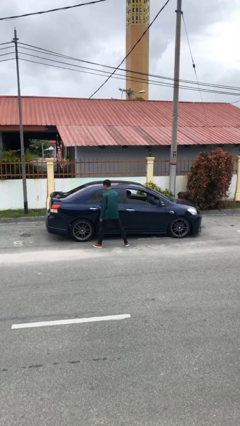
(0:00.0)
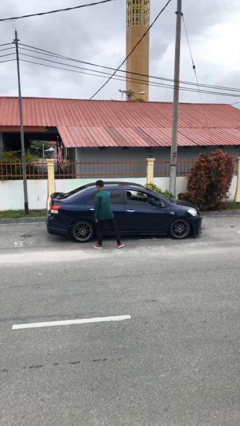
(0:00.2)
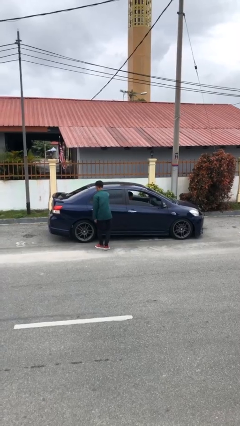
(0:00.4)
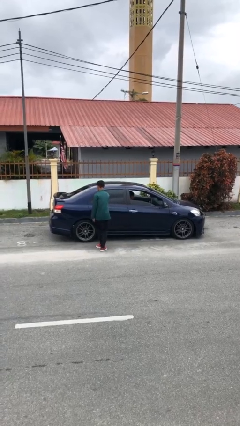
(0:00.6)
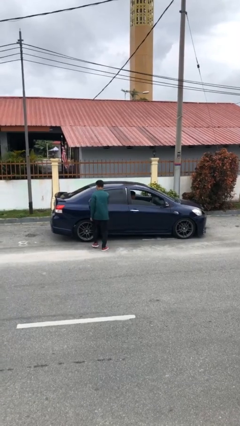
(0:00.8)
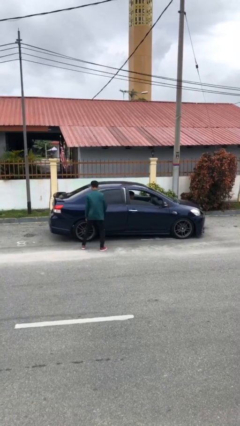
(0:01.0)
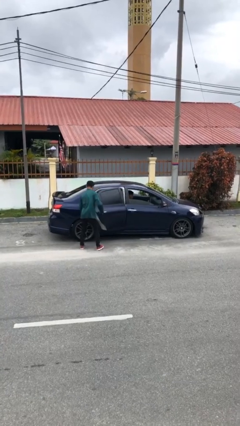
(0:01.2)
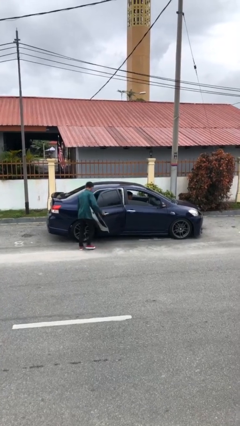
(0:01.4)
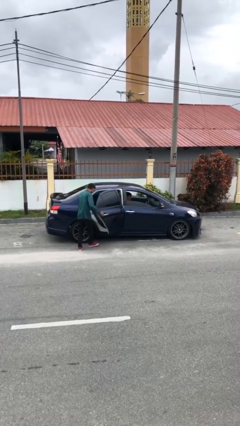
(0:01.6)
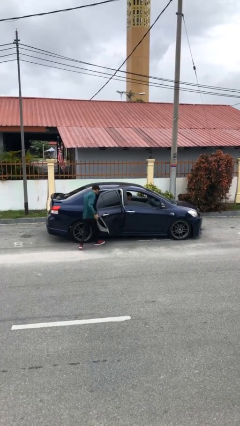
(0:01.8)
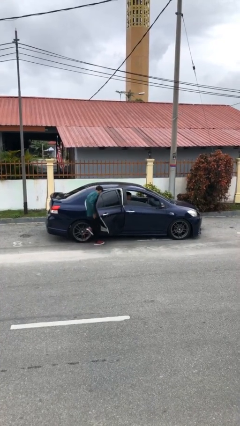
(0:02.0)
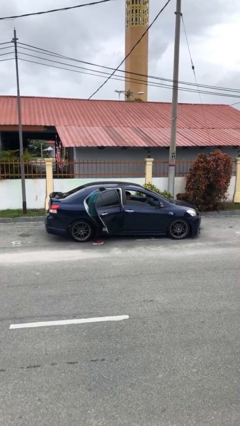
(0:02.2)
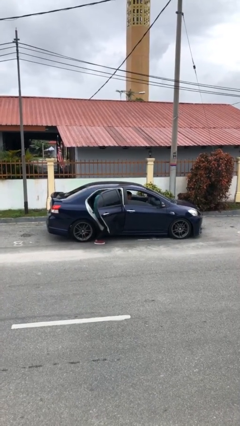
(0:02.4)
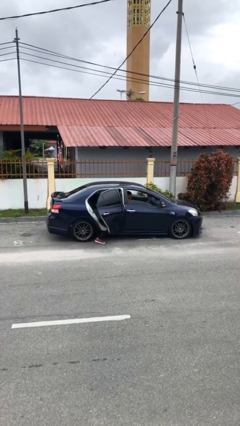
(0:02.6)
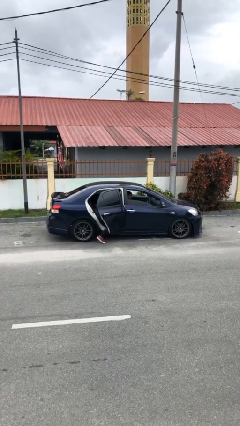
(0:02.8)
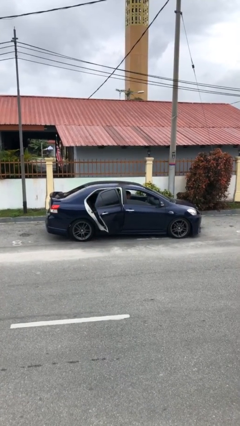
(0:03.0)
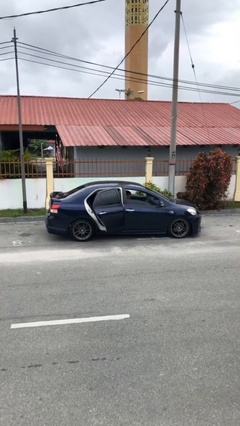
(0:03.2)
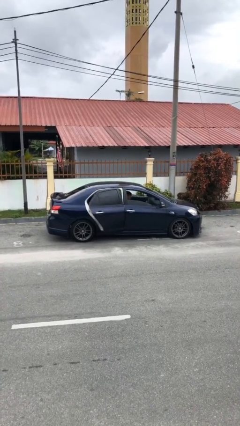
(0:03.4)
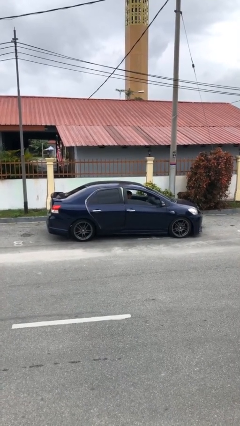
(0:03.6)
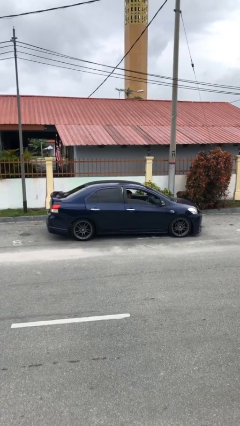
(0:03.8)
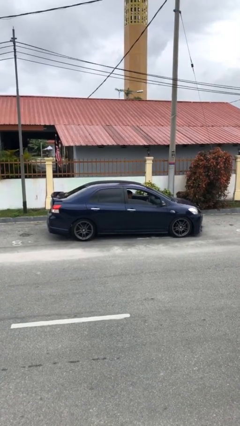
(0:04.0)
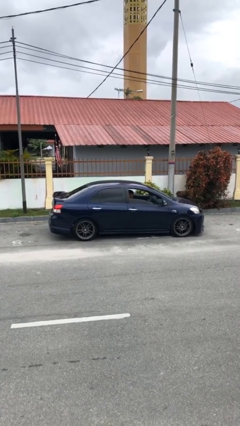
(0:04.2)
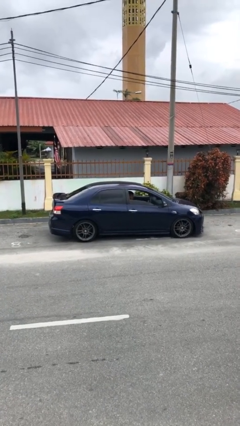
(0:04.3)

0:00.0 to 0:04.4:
car picks up person

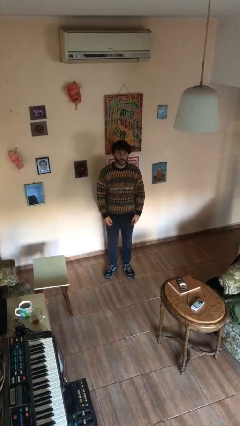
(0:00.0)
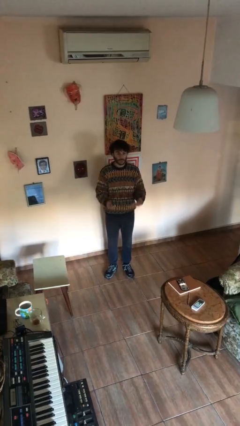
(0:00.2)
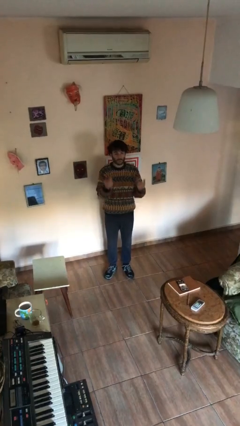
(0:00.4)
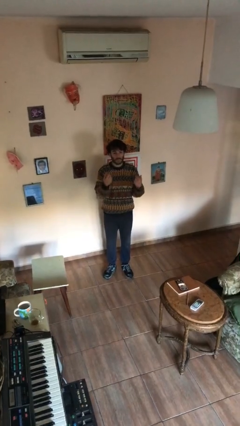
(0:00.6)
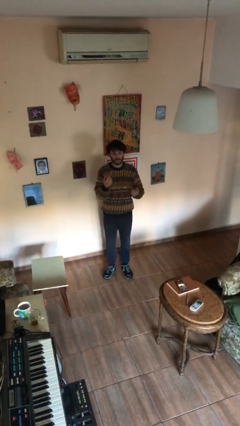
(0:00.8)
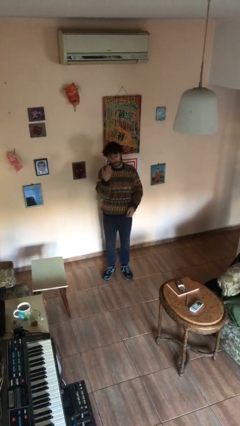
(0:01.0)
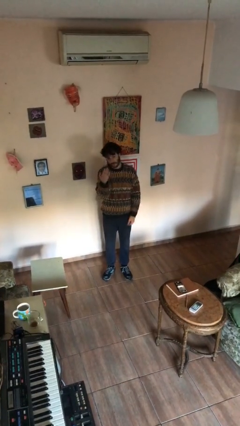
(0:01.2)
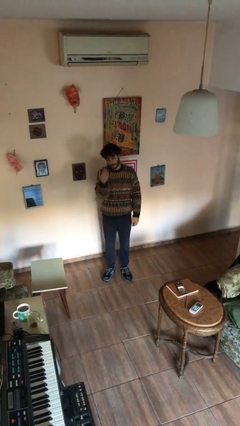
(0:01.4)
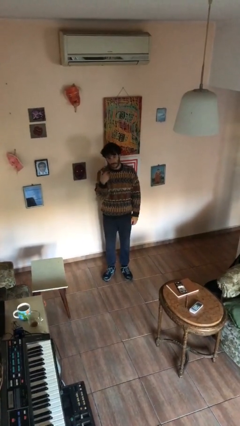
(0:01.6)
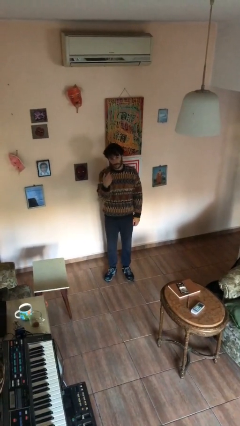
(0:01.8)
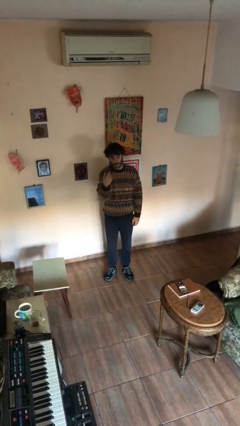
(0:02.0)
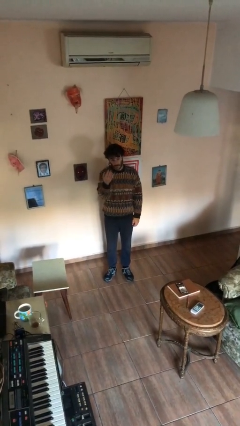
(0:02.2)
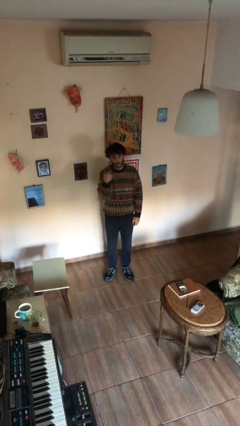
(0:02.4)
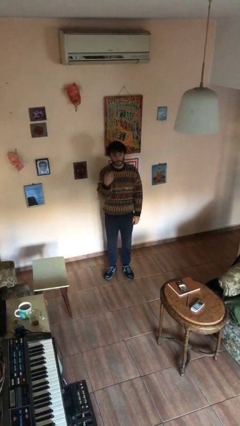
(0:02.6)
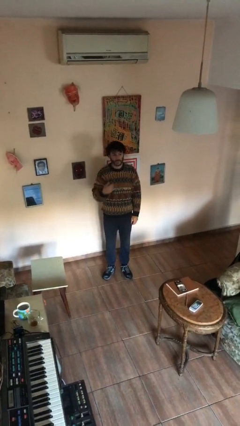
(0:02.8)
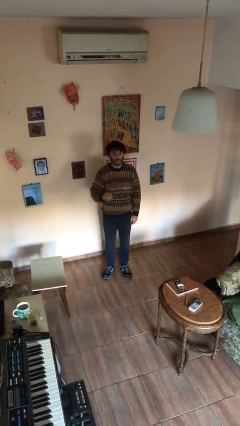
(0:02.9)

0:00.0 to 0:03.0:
person gestures come here

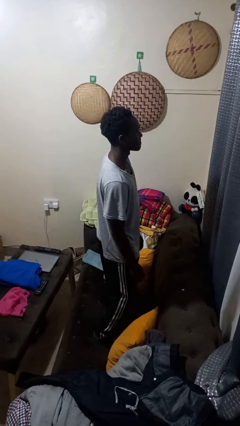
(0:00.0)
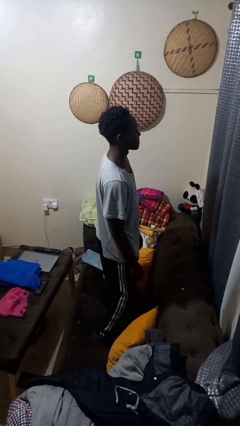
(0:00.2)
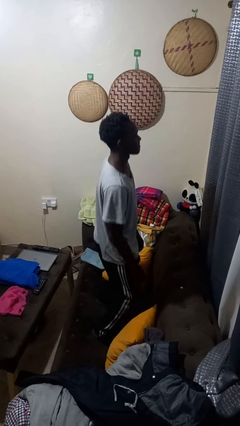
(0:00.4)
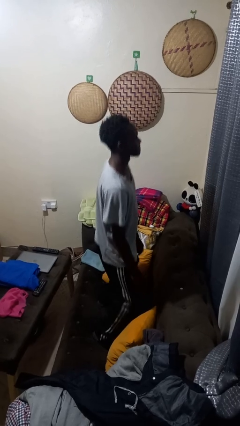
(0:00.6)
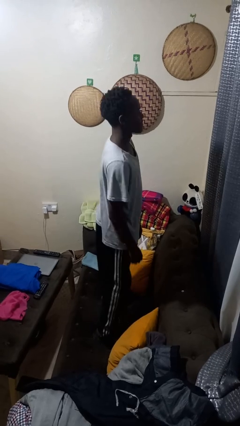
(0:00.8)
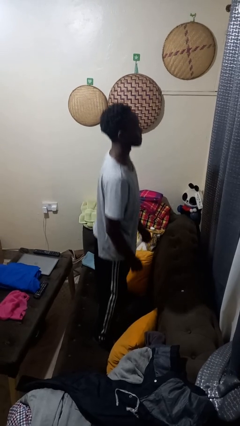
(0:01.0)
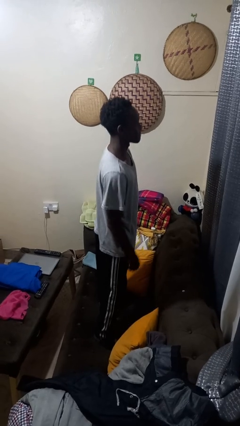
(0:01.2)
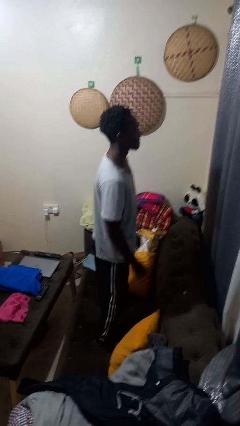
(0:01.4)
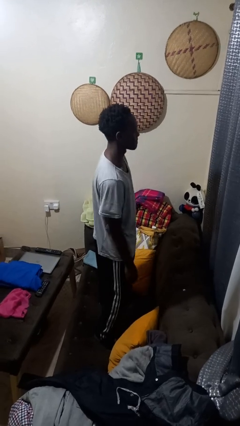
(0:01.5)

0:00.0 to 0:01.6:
person jumps on couch

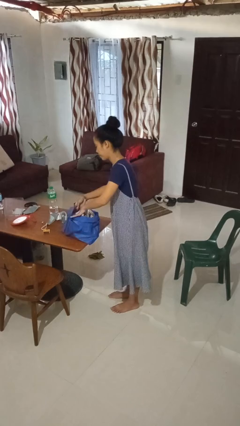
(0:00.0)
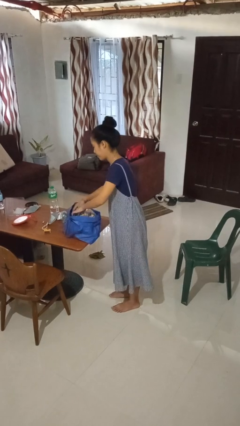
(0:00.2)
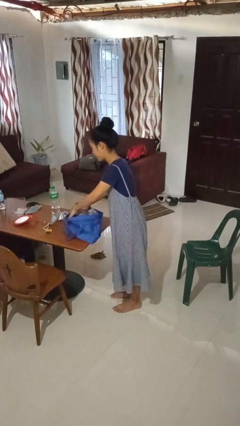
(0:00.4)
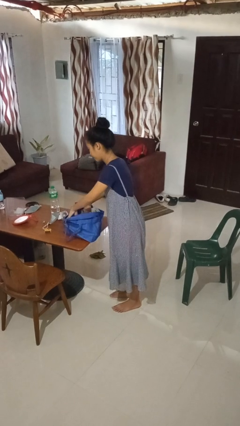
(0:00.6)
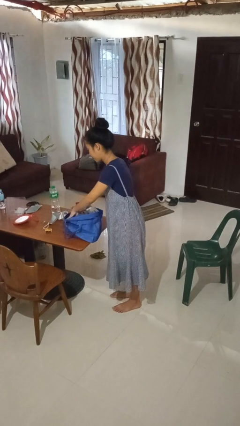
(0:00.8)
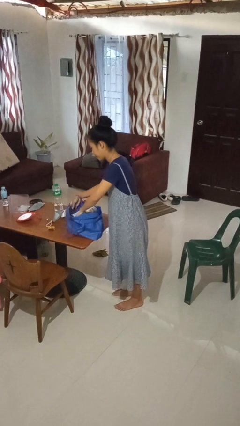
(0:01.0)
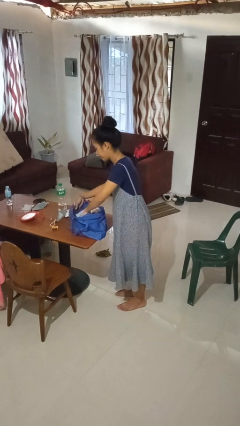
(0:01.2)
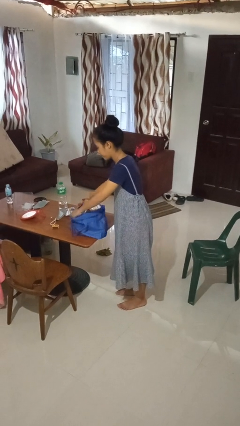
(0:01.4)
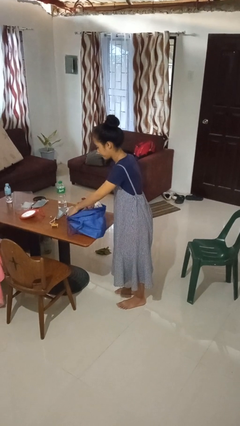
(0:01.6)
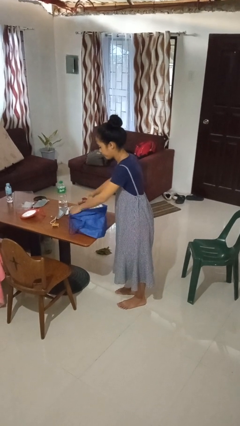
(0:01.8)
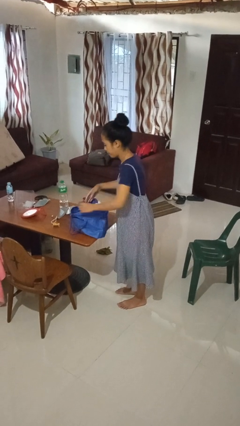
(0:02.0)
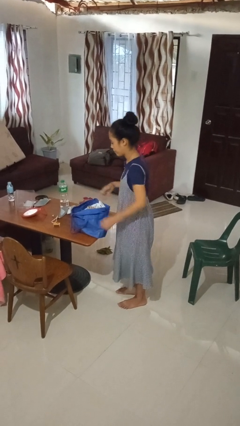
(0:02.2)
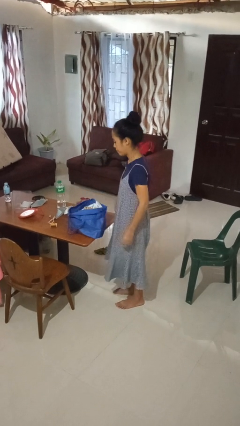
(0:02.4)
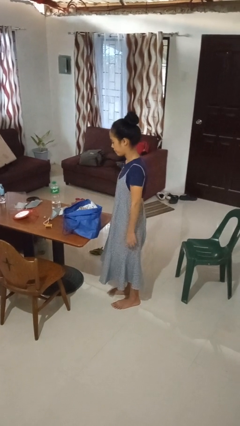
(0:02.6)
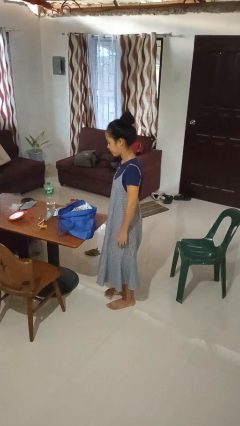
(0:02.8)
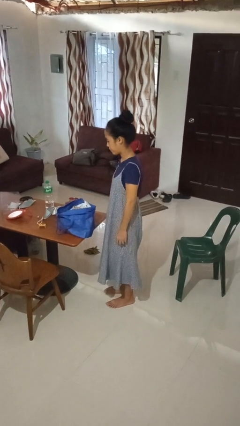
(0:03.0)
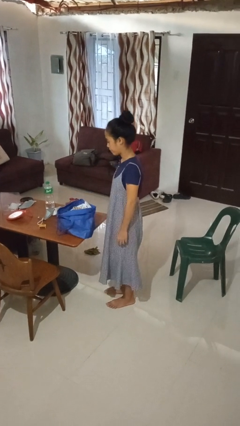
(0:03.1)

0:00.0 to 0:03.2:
person searches in bag

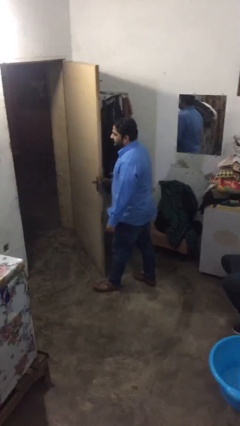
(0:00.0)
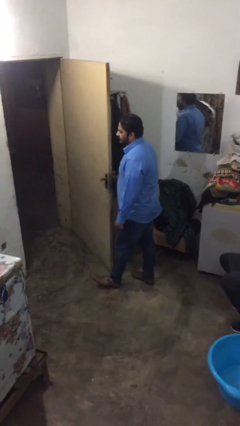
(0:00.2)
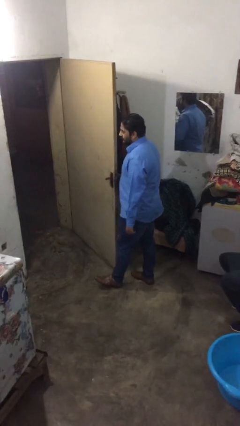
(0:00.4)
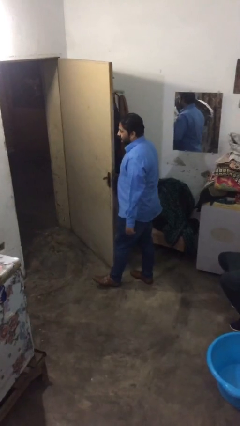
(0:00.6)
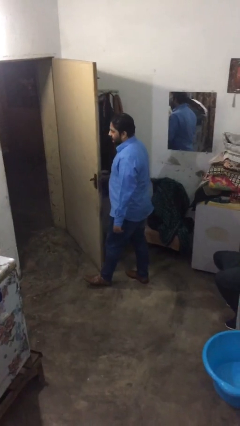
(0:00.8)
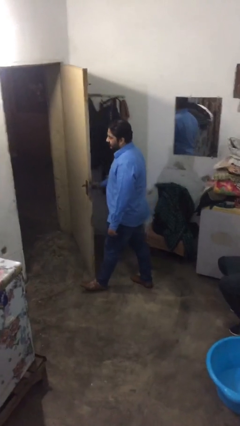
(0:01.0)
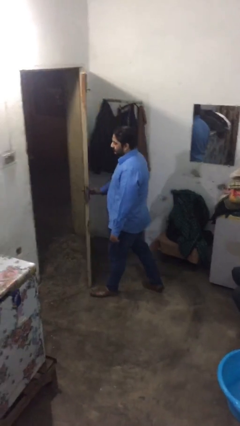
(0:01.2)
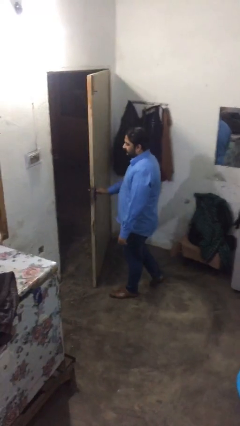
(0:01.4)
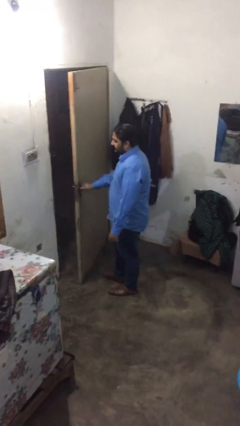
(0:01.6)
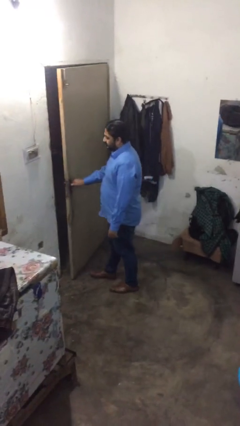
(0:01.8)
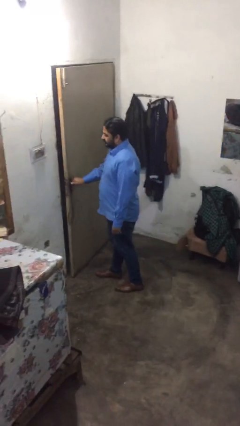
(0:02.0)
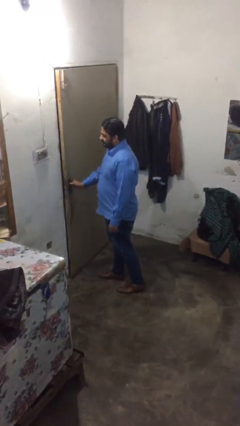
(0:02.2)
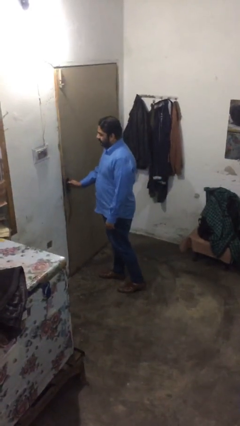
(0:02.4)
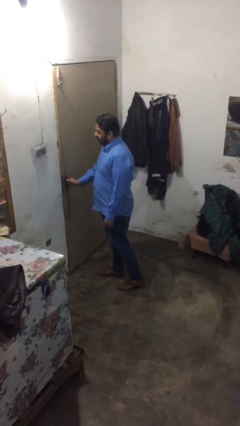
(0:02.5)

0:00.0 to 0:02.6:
person closes facility door

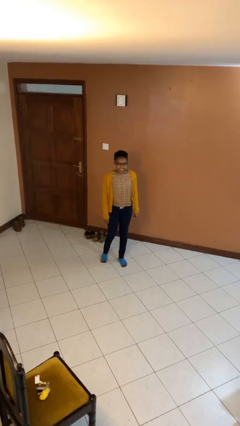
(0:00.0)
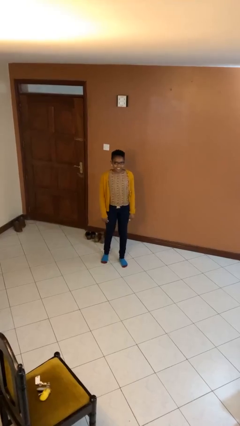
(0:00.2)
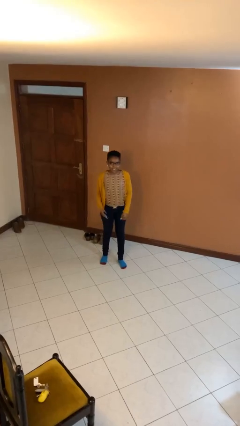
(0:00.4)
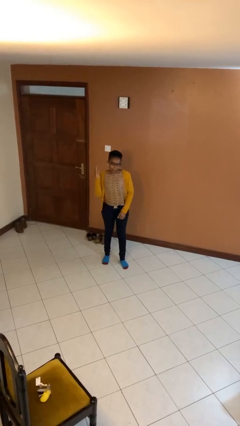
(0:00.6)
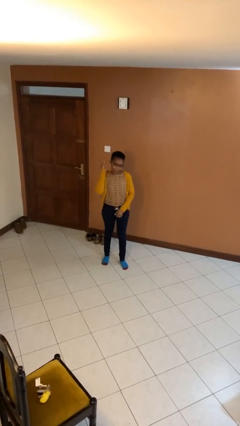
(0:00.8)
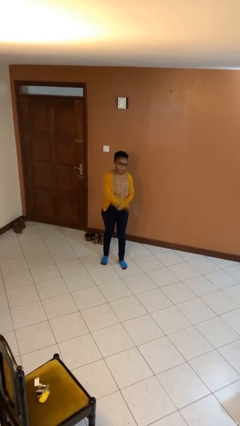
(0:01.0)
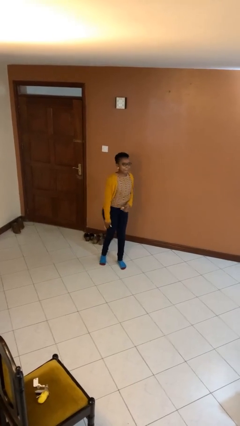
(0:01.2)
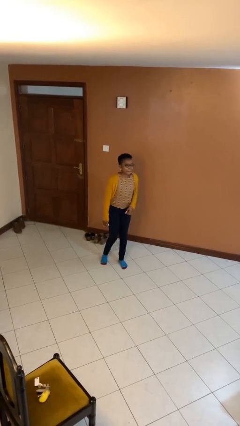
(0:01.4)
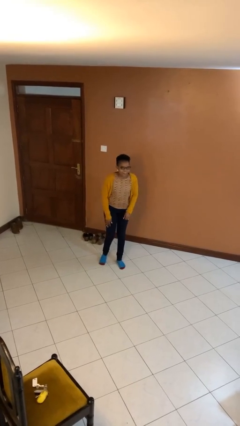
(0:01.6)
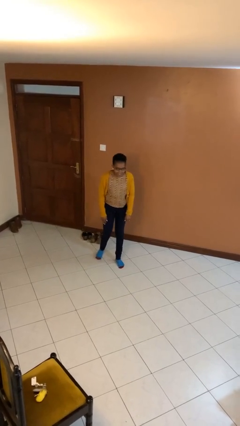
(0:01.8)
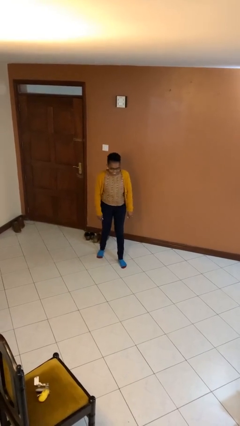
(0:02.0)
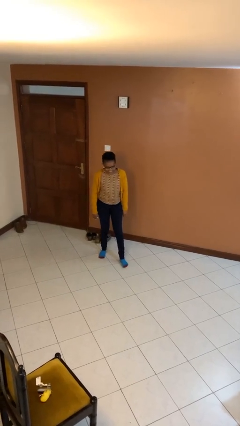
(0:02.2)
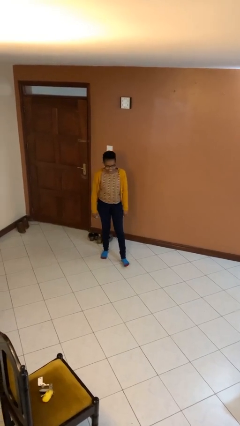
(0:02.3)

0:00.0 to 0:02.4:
person karate chop

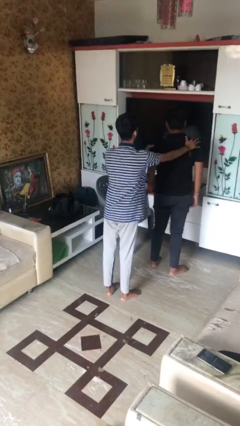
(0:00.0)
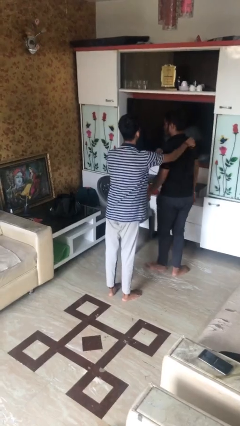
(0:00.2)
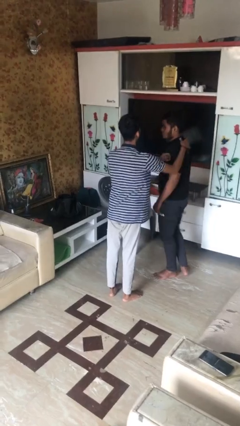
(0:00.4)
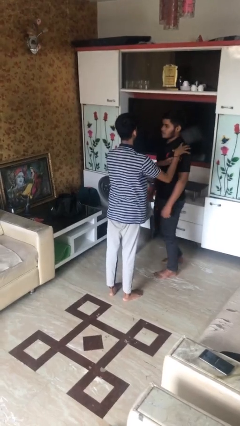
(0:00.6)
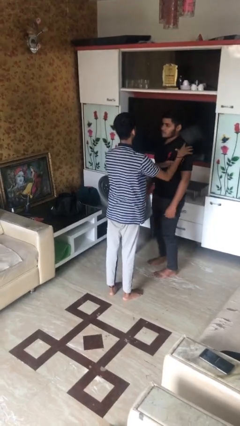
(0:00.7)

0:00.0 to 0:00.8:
person spins person around
